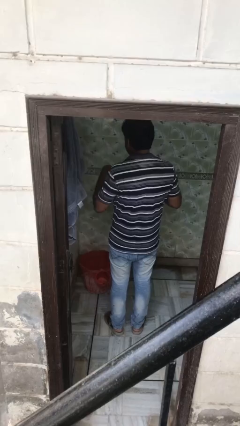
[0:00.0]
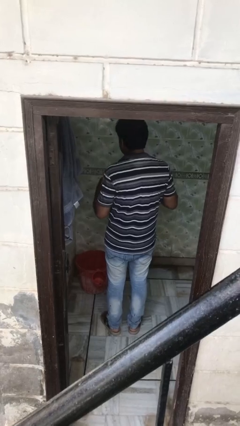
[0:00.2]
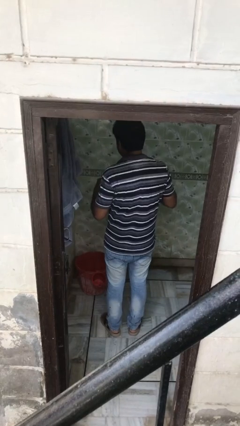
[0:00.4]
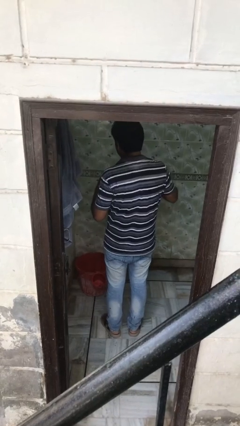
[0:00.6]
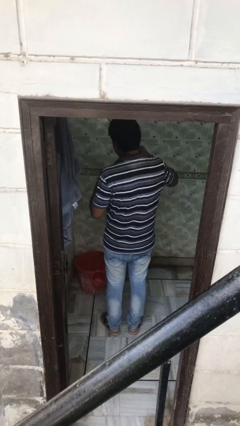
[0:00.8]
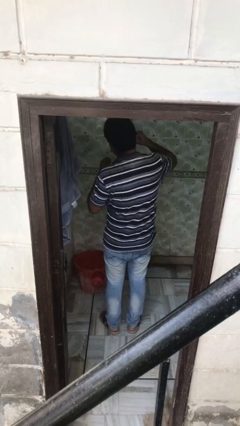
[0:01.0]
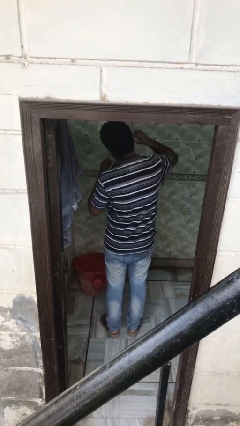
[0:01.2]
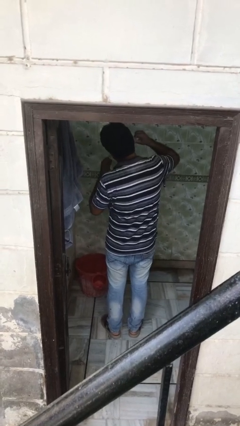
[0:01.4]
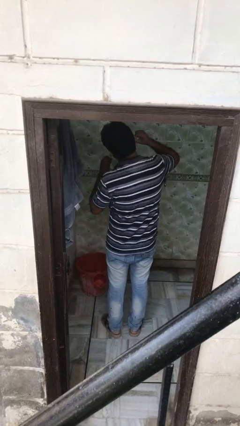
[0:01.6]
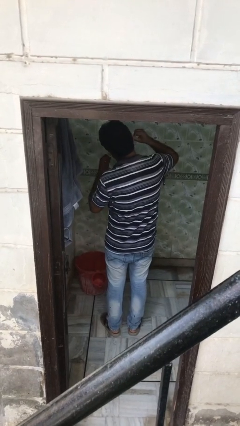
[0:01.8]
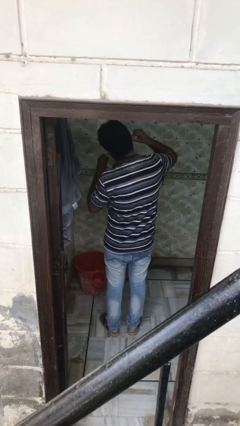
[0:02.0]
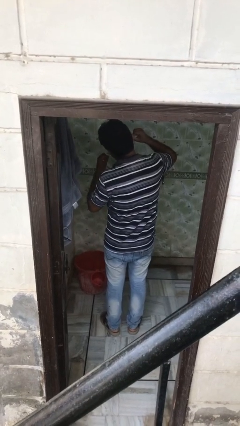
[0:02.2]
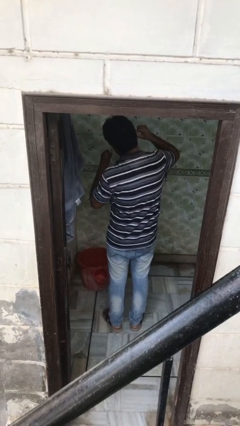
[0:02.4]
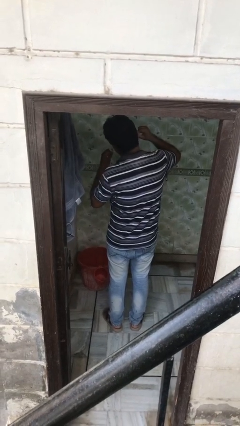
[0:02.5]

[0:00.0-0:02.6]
person flosses

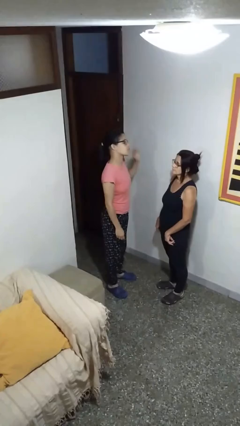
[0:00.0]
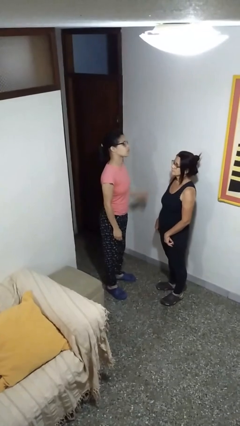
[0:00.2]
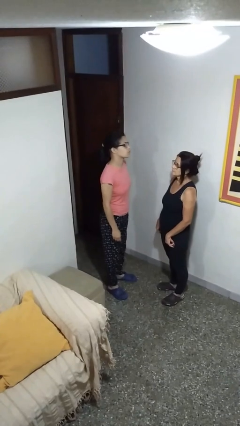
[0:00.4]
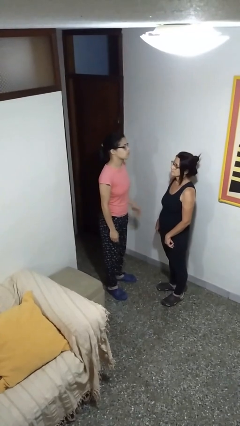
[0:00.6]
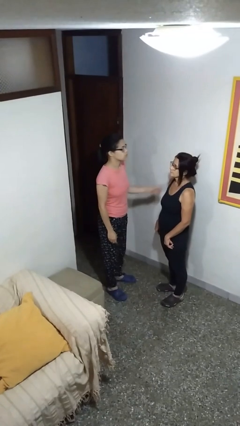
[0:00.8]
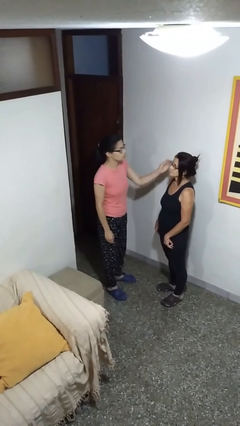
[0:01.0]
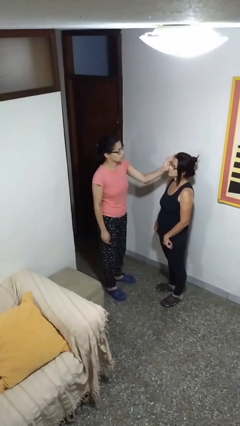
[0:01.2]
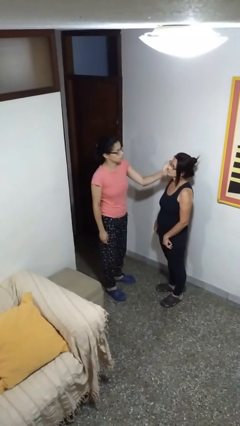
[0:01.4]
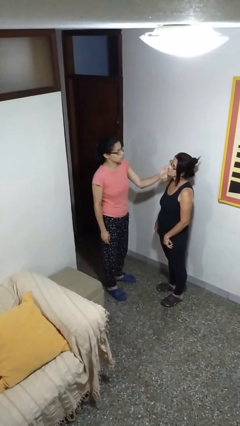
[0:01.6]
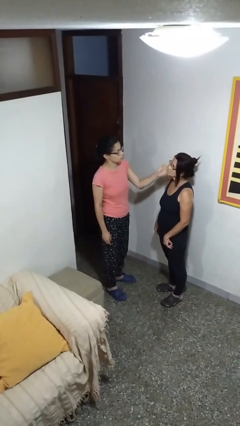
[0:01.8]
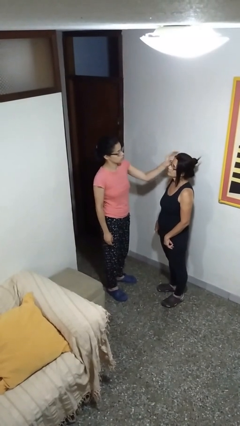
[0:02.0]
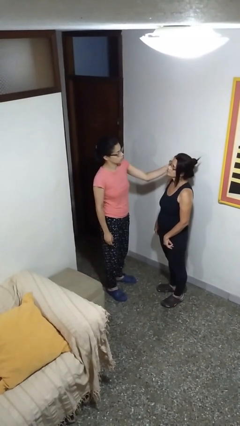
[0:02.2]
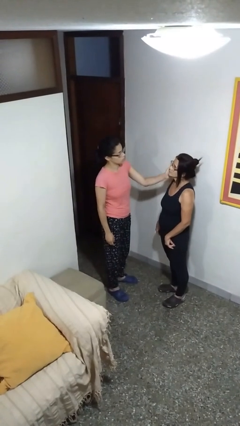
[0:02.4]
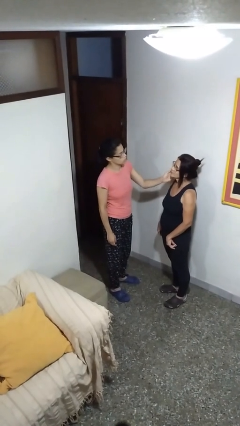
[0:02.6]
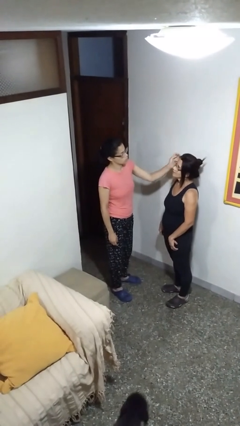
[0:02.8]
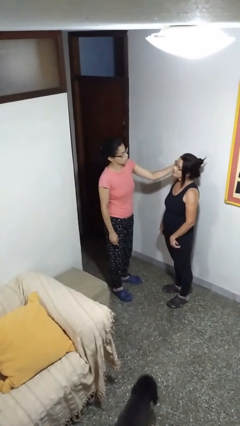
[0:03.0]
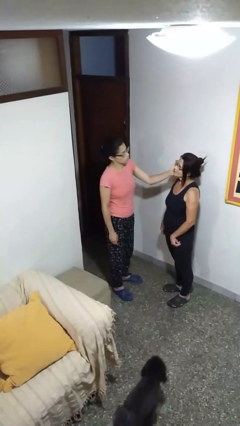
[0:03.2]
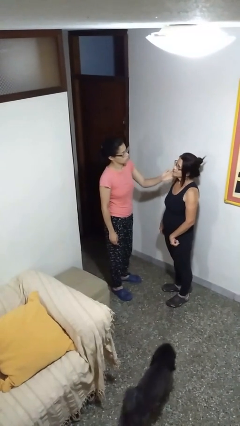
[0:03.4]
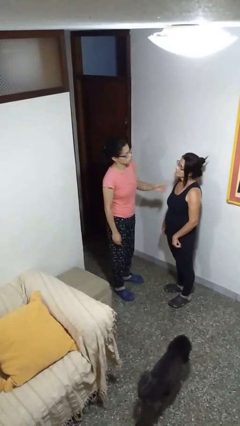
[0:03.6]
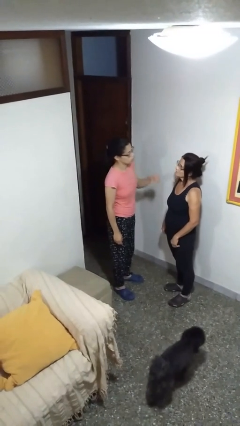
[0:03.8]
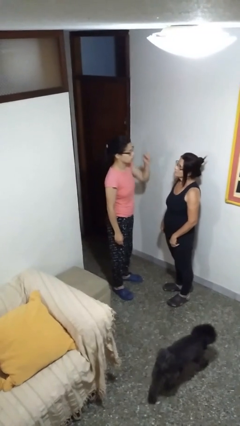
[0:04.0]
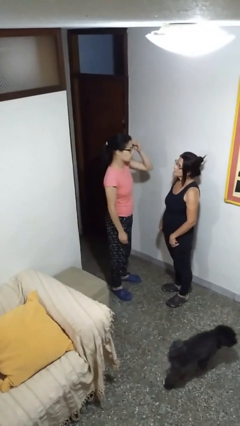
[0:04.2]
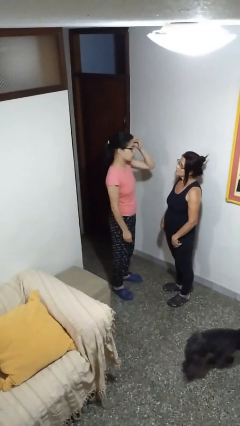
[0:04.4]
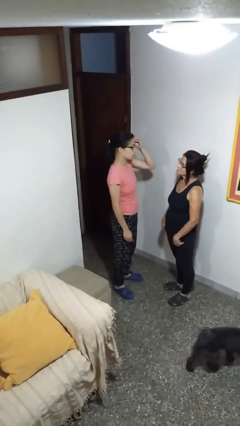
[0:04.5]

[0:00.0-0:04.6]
person touches face of person

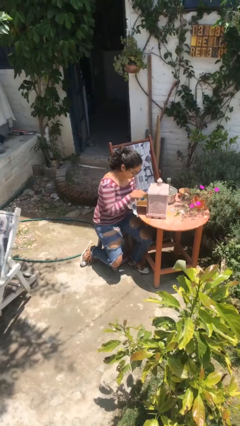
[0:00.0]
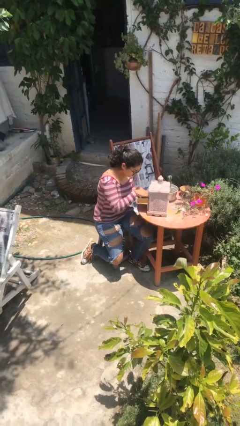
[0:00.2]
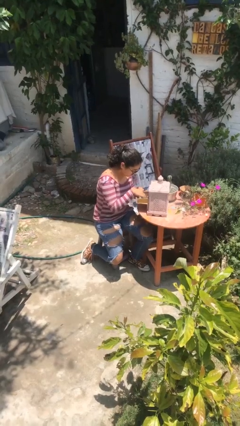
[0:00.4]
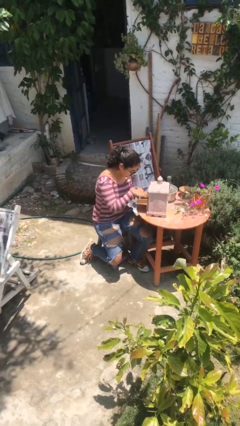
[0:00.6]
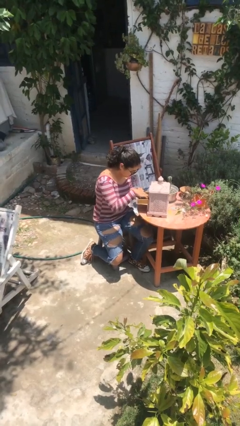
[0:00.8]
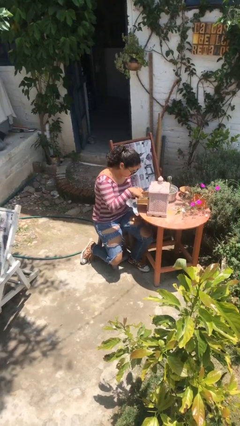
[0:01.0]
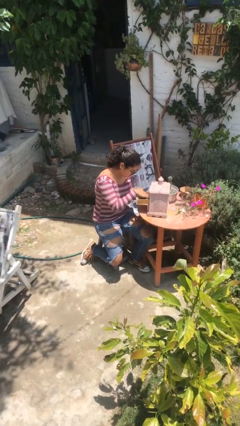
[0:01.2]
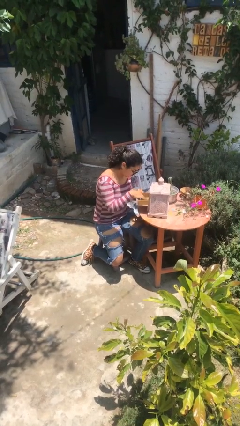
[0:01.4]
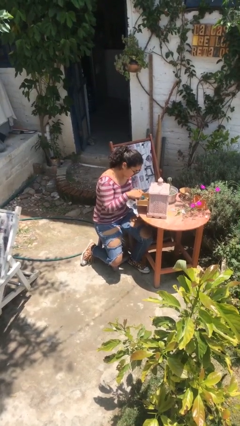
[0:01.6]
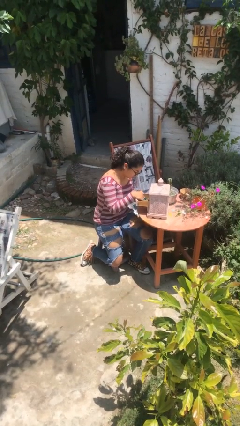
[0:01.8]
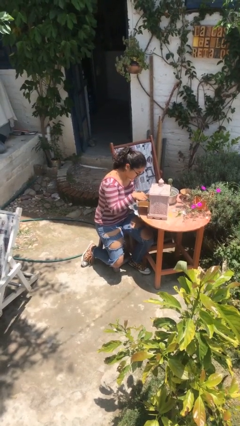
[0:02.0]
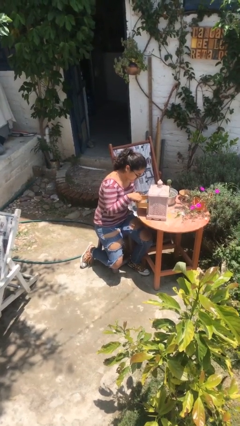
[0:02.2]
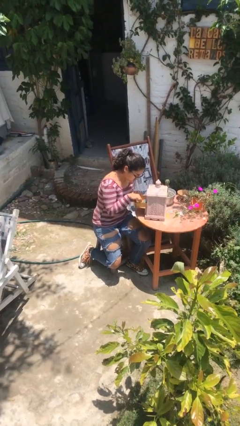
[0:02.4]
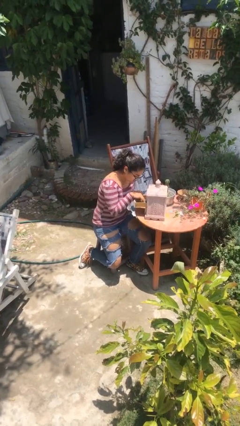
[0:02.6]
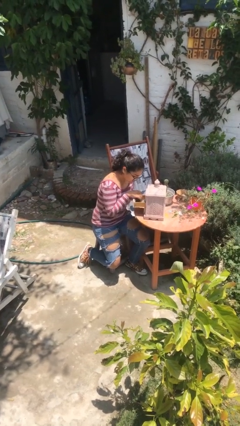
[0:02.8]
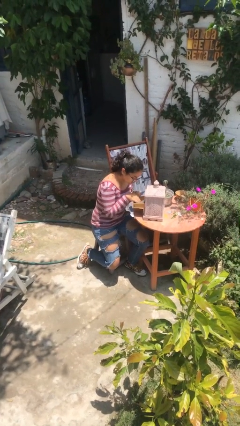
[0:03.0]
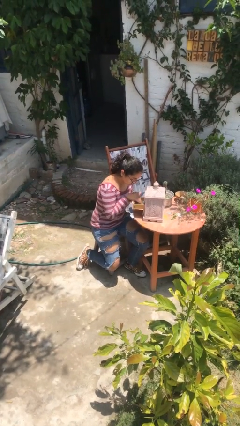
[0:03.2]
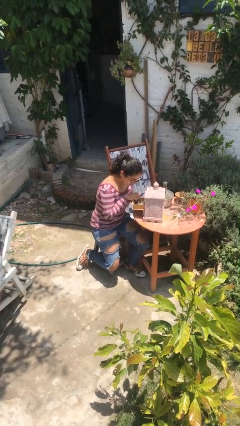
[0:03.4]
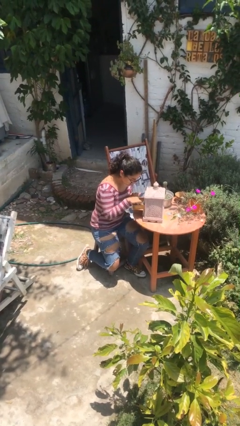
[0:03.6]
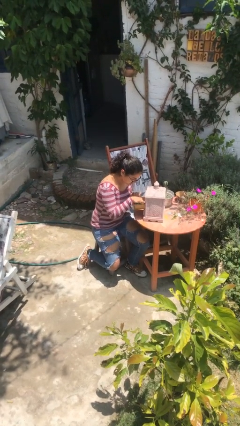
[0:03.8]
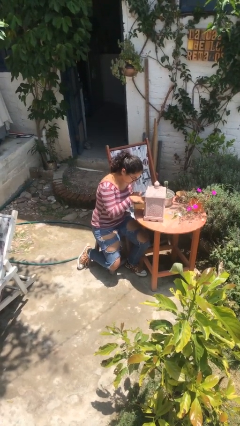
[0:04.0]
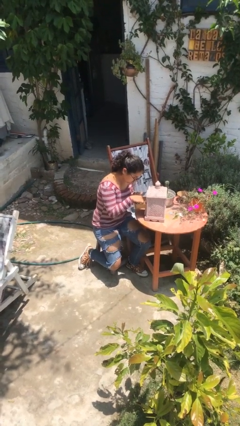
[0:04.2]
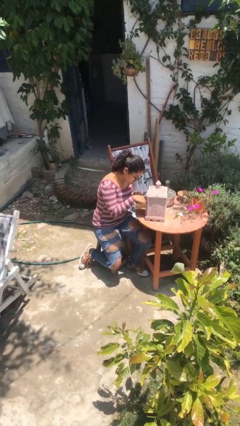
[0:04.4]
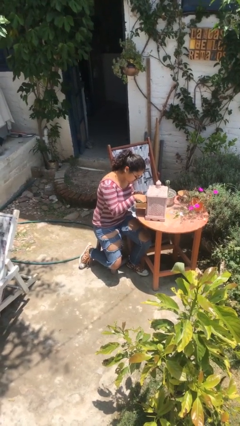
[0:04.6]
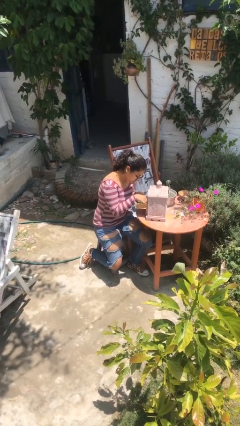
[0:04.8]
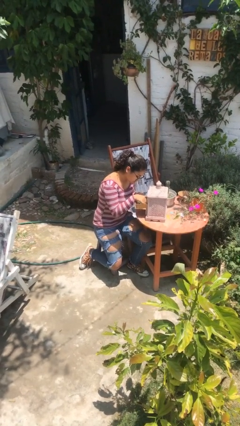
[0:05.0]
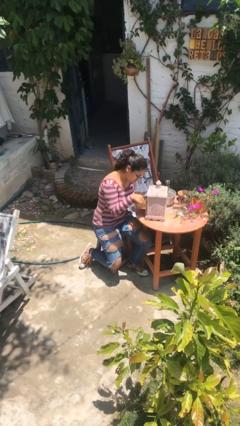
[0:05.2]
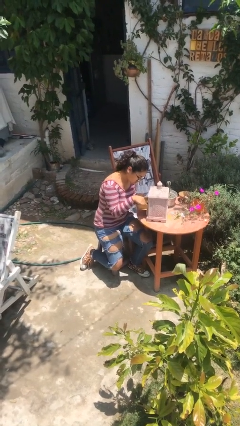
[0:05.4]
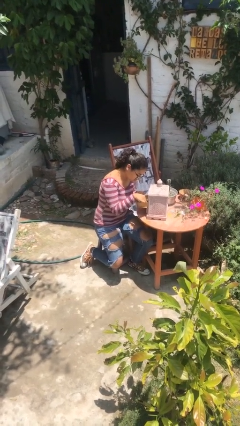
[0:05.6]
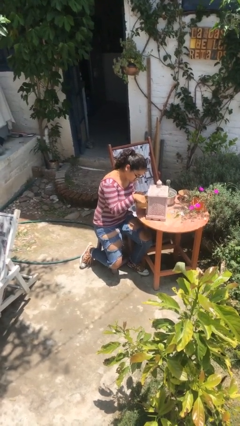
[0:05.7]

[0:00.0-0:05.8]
person searches jewelry box

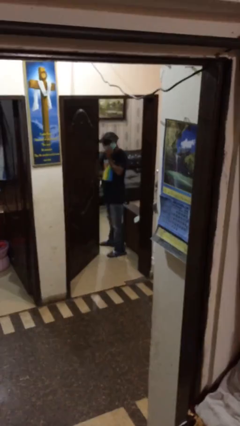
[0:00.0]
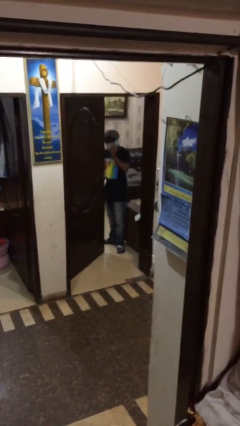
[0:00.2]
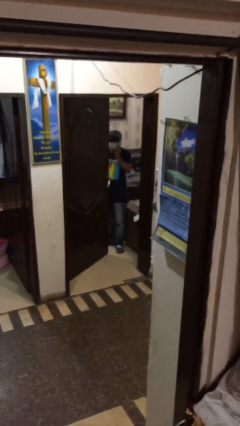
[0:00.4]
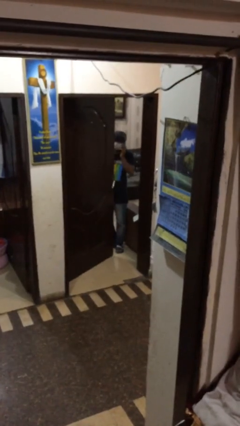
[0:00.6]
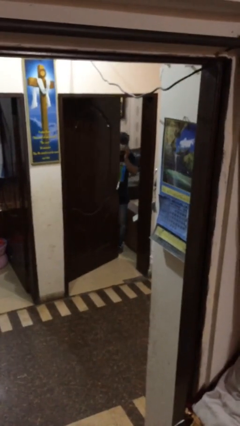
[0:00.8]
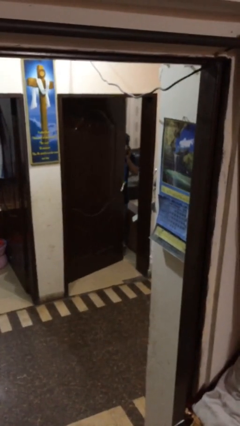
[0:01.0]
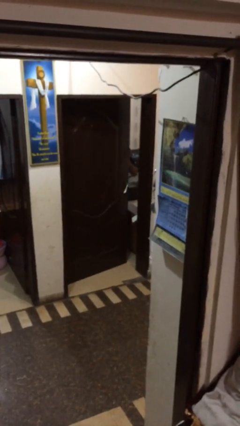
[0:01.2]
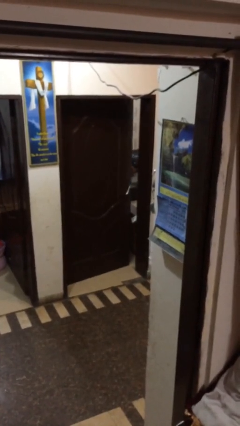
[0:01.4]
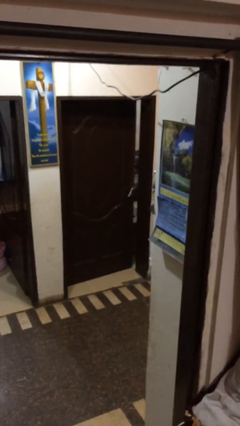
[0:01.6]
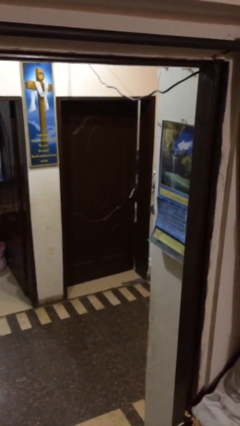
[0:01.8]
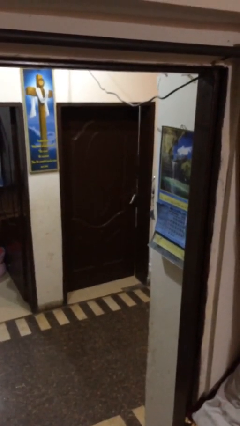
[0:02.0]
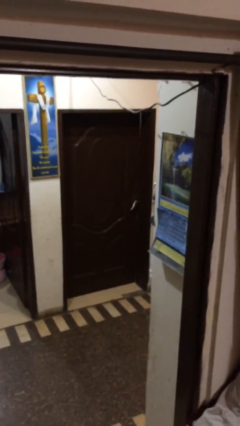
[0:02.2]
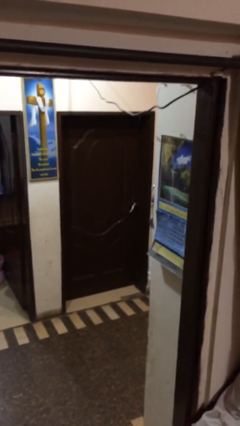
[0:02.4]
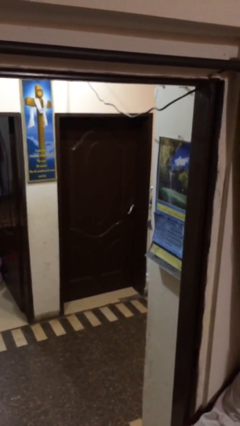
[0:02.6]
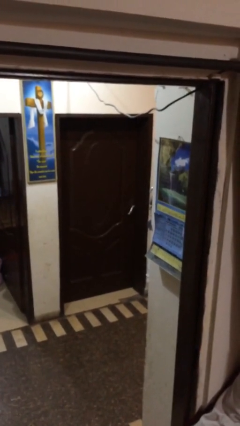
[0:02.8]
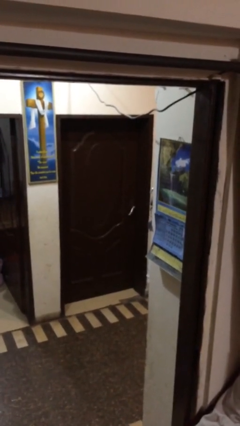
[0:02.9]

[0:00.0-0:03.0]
person closes facility door

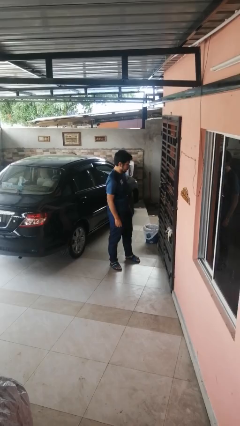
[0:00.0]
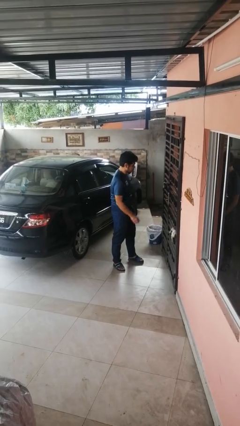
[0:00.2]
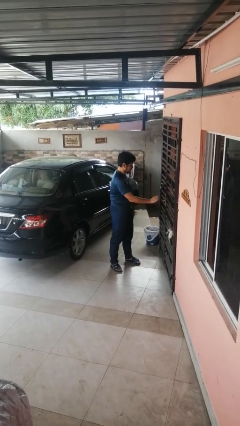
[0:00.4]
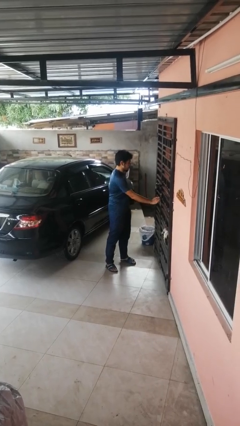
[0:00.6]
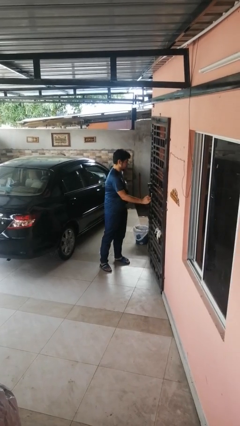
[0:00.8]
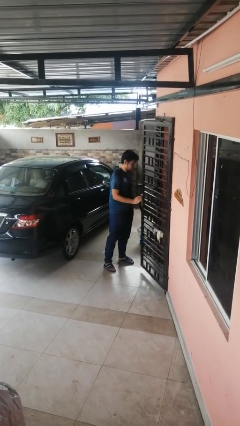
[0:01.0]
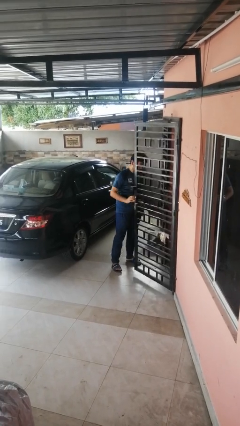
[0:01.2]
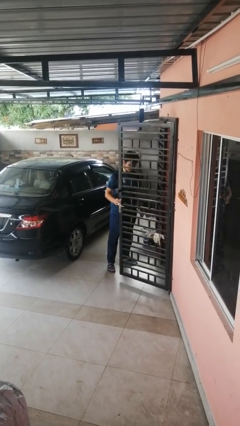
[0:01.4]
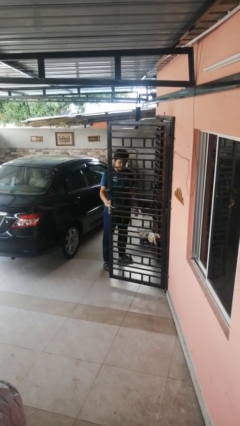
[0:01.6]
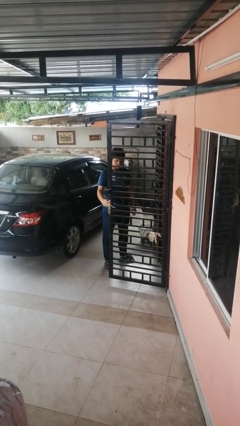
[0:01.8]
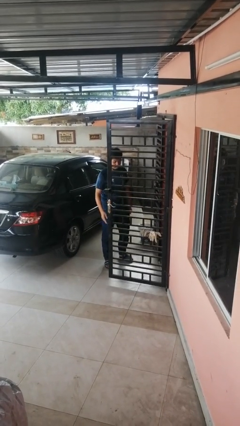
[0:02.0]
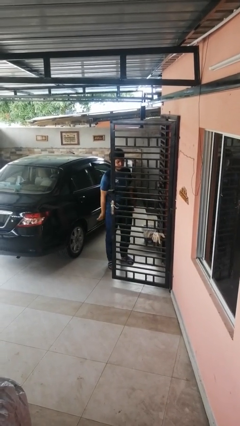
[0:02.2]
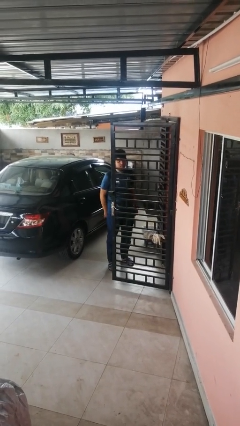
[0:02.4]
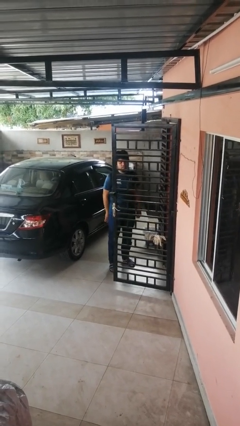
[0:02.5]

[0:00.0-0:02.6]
person opens gate
